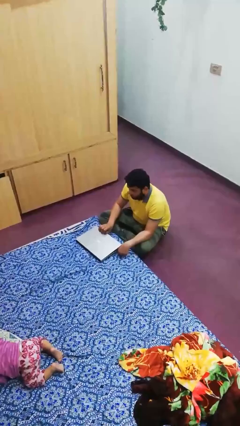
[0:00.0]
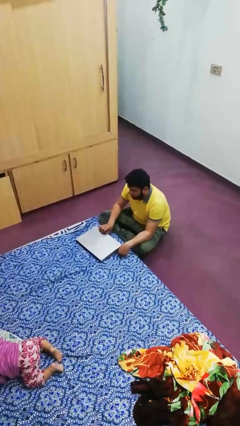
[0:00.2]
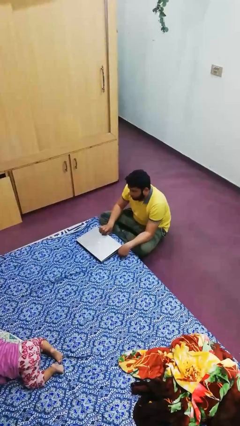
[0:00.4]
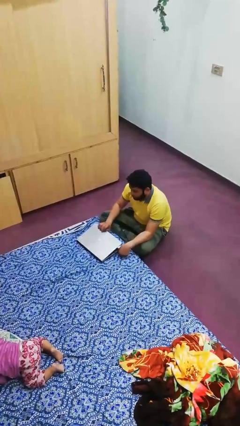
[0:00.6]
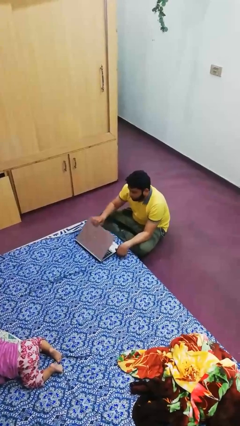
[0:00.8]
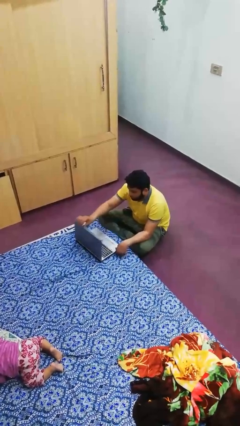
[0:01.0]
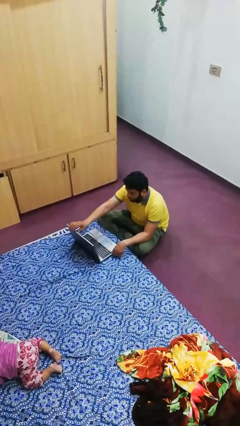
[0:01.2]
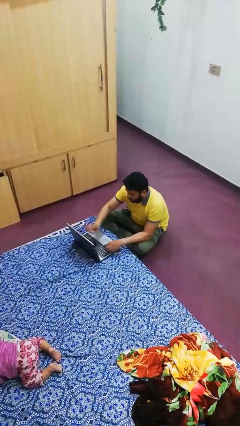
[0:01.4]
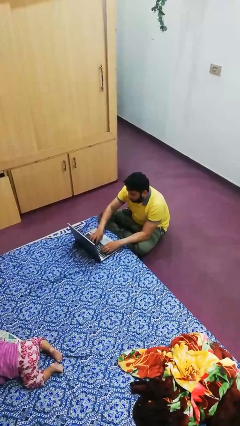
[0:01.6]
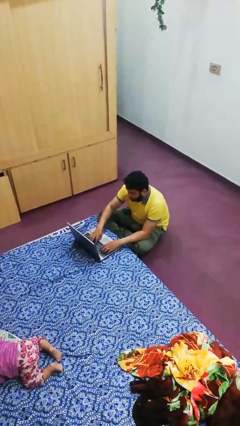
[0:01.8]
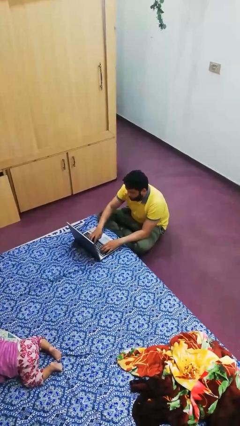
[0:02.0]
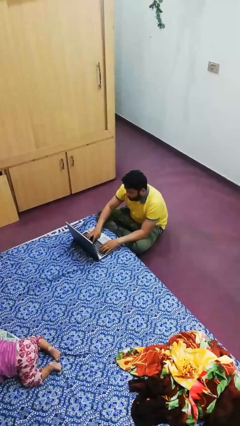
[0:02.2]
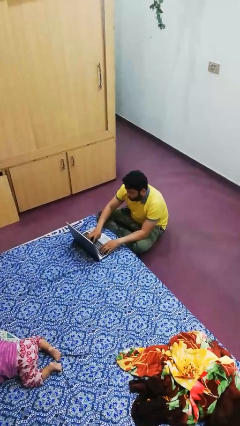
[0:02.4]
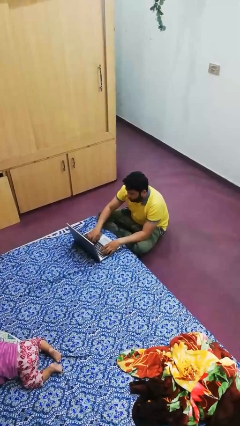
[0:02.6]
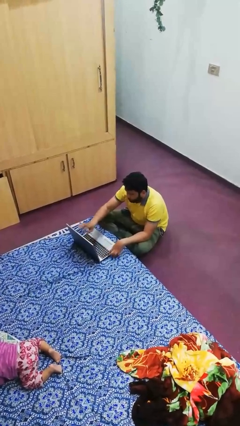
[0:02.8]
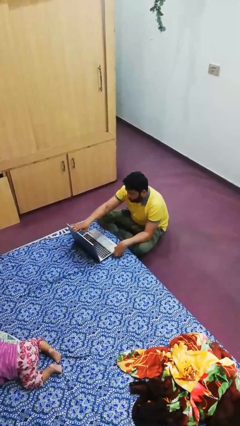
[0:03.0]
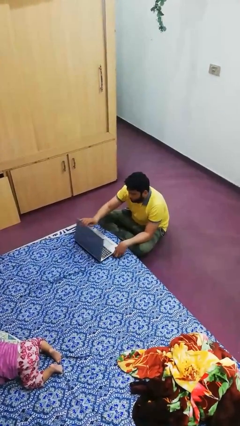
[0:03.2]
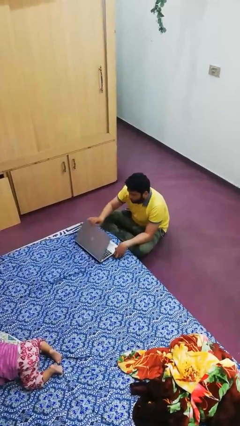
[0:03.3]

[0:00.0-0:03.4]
person interacts with laptop

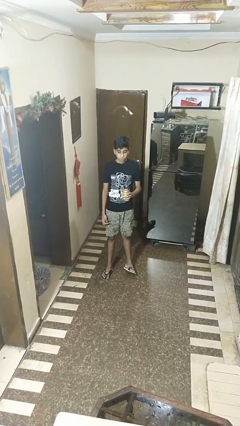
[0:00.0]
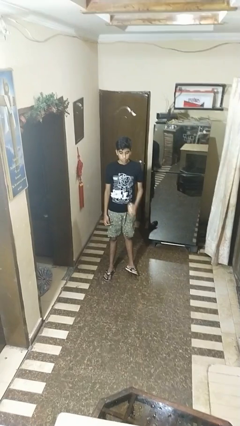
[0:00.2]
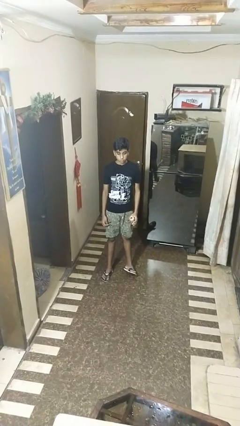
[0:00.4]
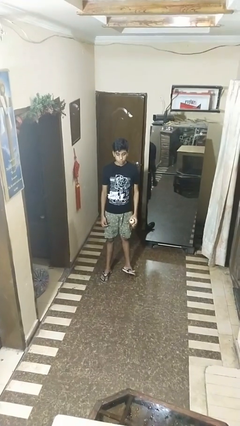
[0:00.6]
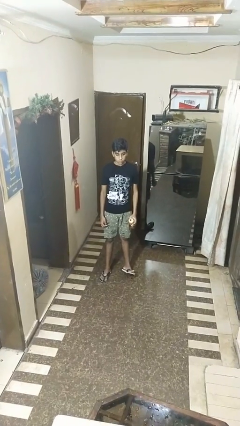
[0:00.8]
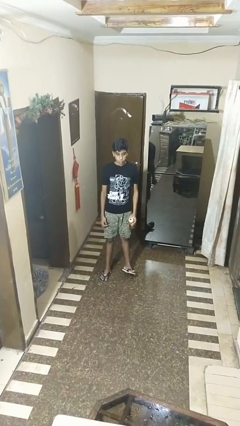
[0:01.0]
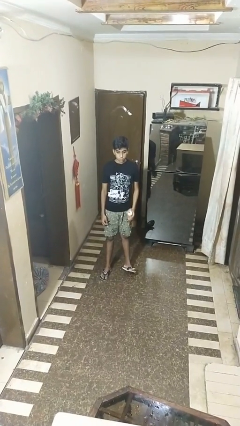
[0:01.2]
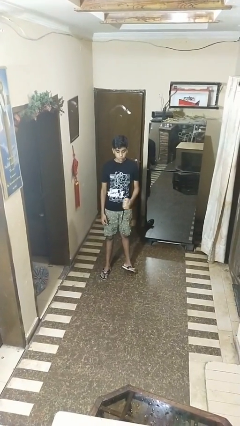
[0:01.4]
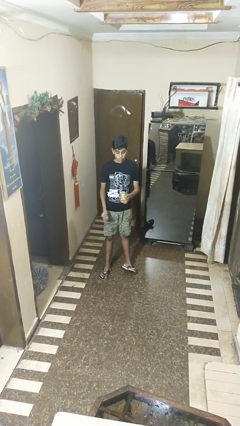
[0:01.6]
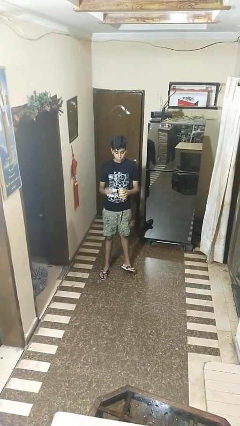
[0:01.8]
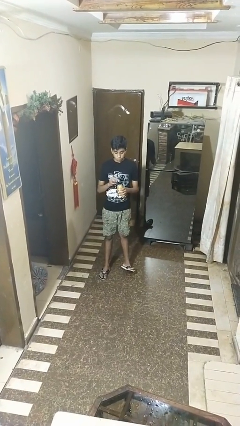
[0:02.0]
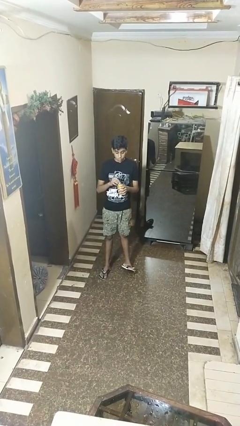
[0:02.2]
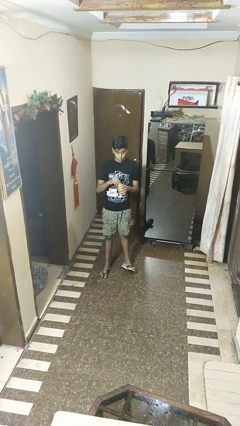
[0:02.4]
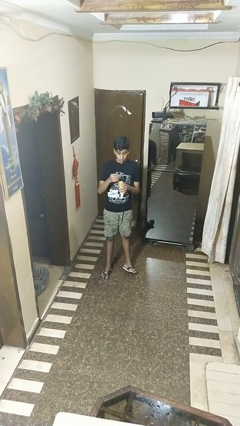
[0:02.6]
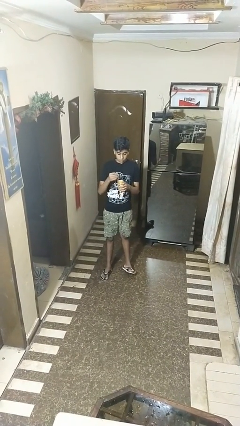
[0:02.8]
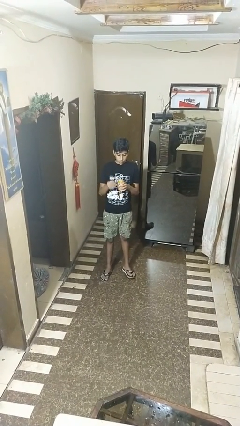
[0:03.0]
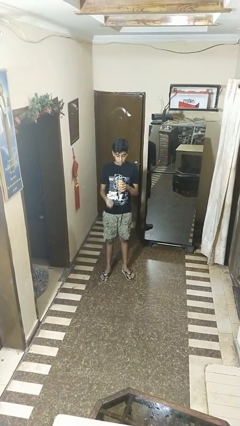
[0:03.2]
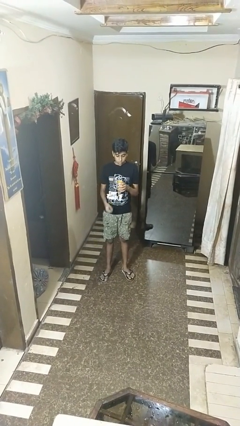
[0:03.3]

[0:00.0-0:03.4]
person opens beverage can

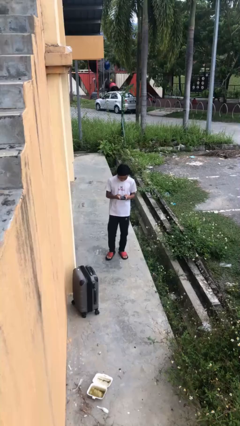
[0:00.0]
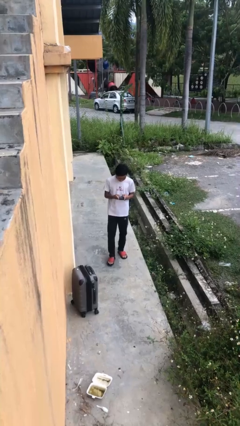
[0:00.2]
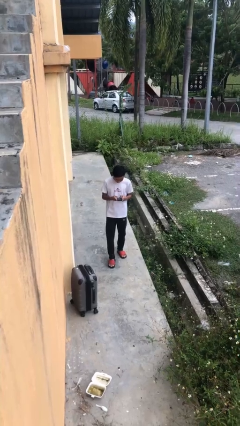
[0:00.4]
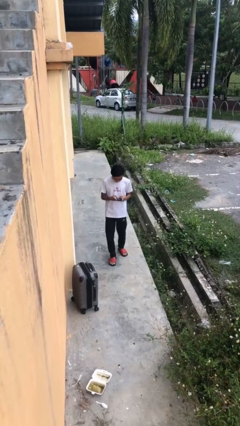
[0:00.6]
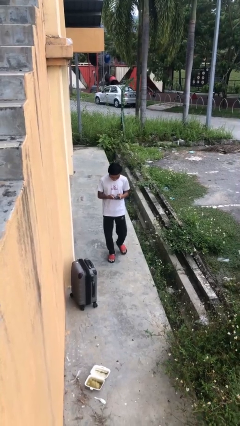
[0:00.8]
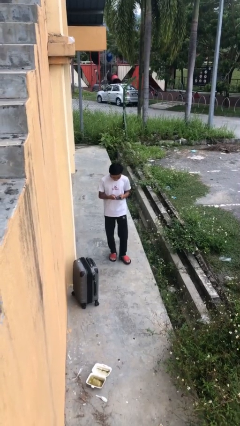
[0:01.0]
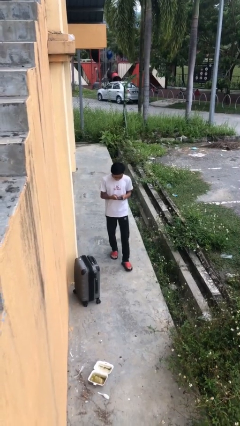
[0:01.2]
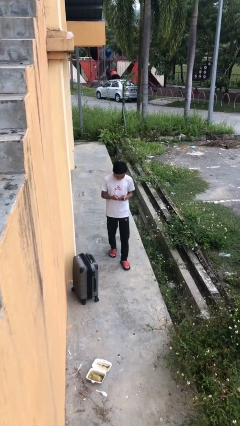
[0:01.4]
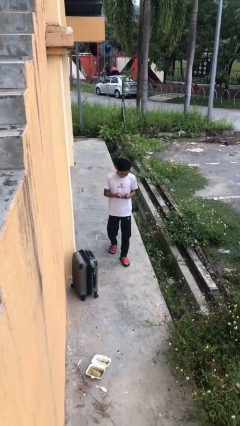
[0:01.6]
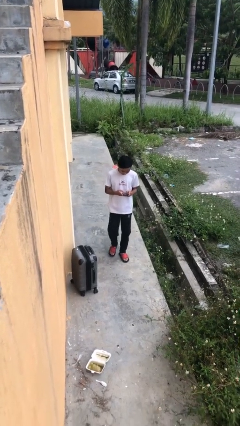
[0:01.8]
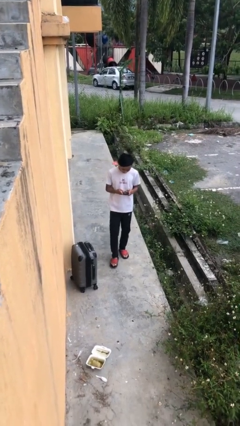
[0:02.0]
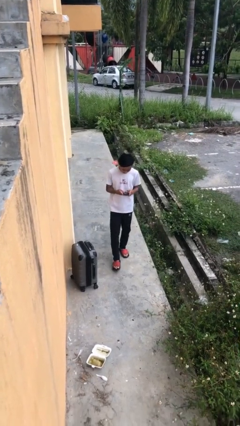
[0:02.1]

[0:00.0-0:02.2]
person texts on phone

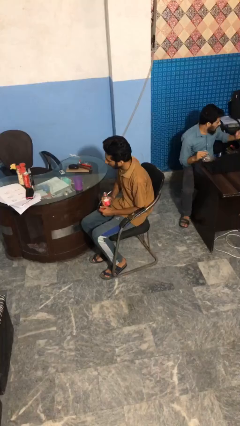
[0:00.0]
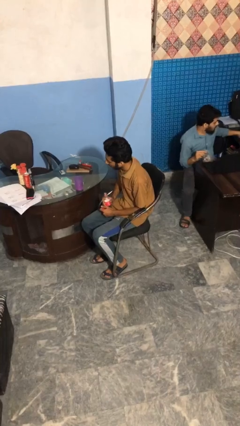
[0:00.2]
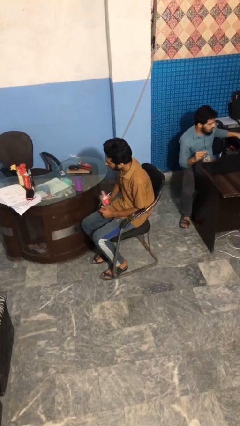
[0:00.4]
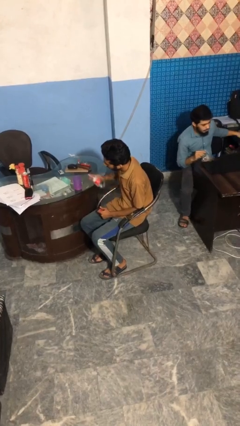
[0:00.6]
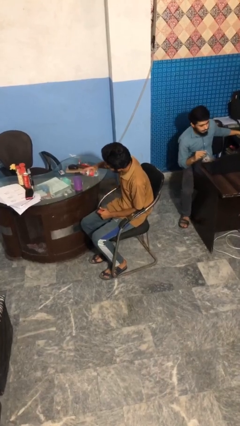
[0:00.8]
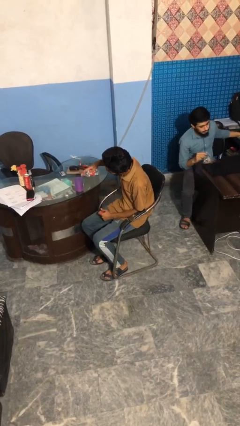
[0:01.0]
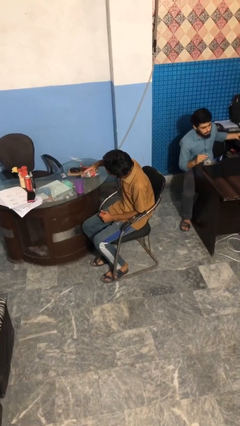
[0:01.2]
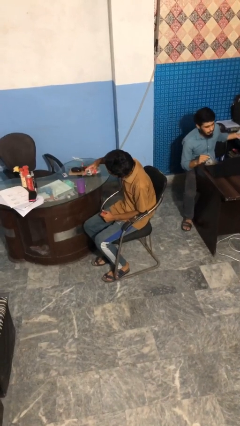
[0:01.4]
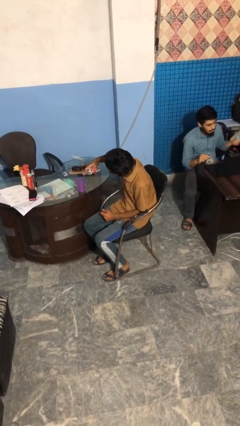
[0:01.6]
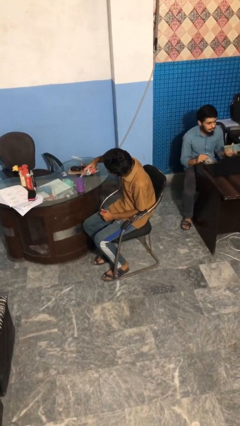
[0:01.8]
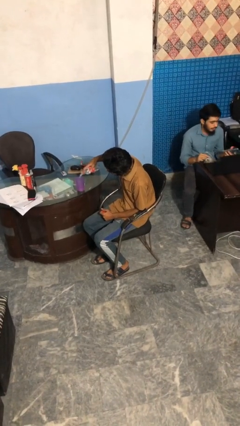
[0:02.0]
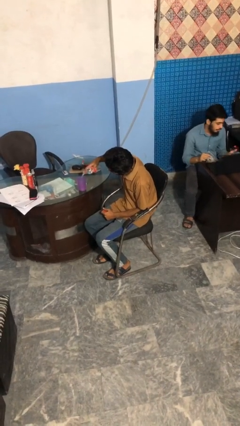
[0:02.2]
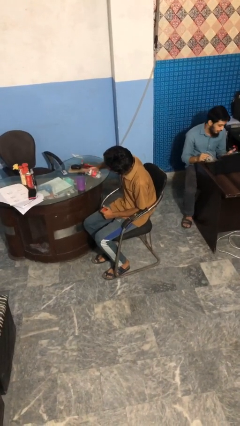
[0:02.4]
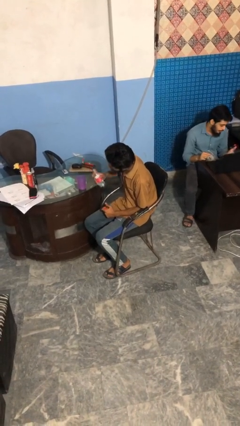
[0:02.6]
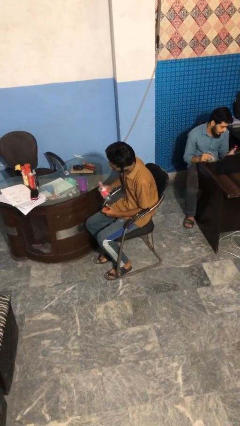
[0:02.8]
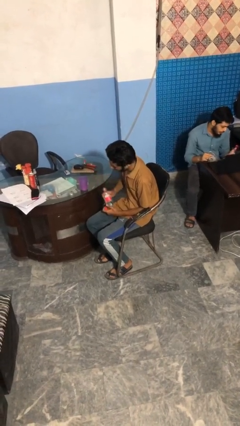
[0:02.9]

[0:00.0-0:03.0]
person pours liquid into cup

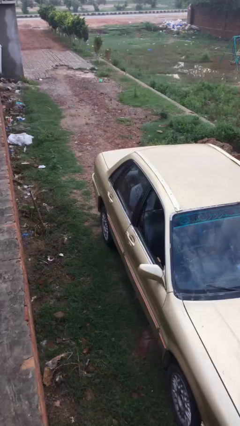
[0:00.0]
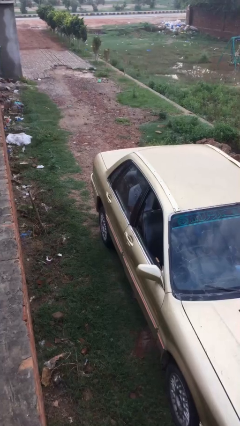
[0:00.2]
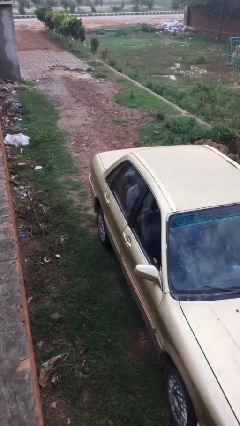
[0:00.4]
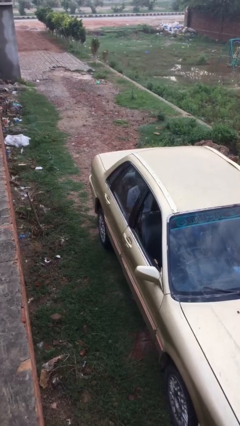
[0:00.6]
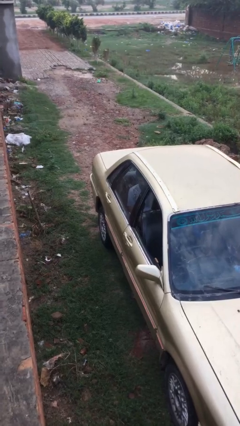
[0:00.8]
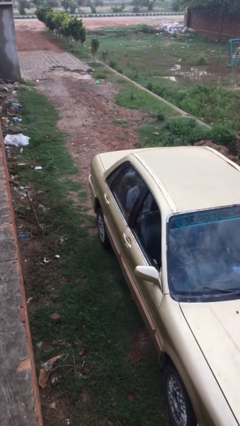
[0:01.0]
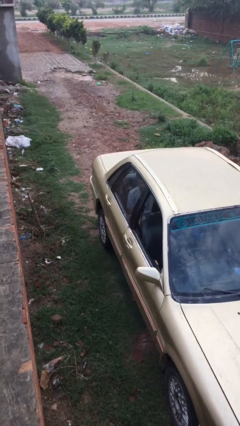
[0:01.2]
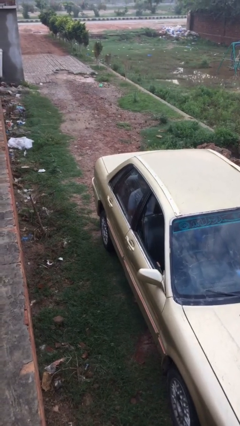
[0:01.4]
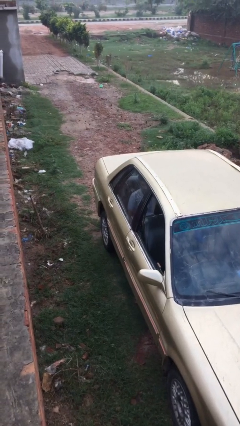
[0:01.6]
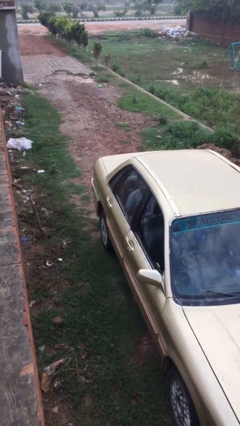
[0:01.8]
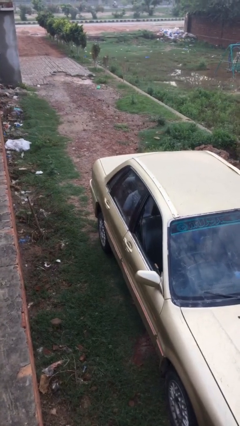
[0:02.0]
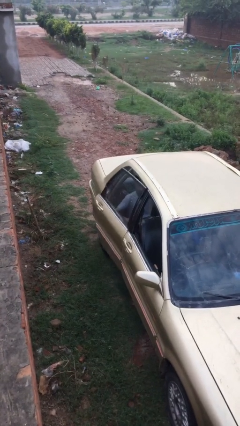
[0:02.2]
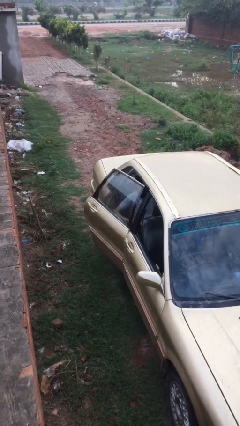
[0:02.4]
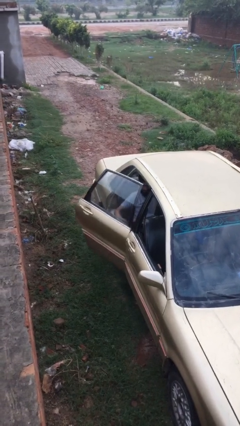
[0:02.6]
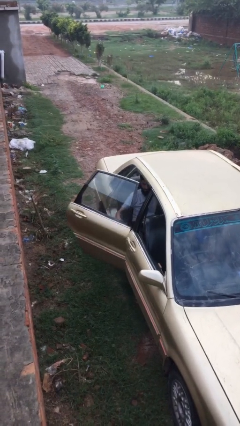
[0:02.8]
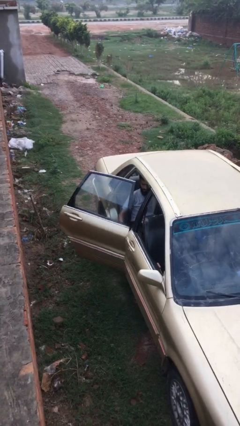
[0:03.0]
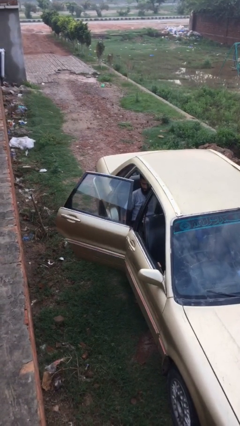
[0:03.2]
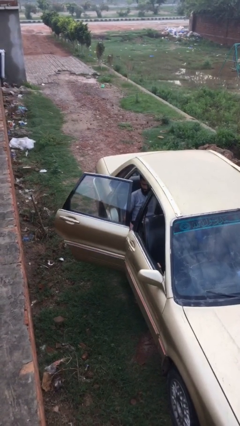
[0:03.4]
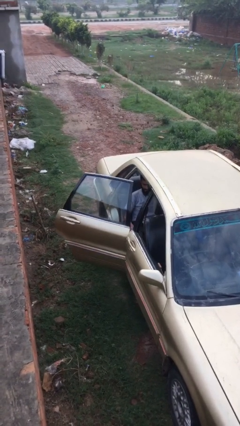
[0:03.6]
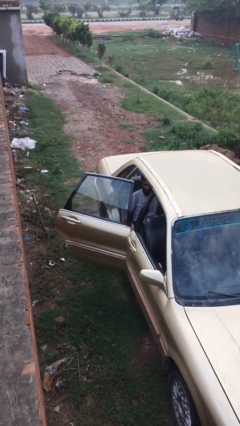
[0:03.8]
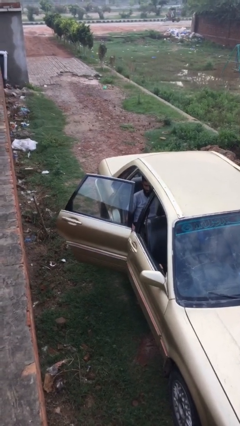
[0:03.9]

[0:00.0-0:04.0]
person opens car door

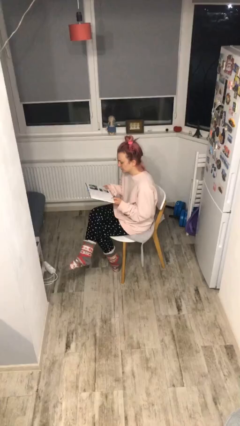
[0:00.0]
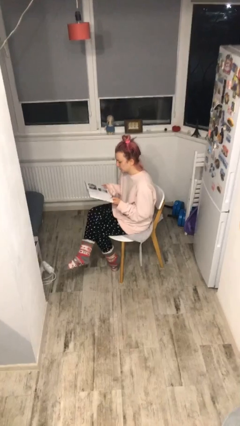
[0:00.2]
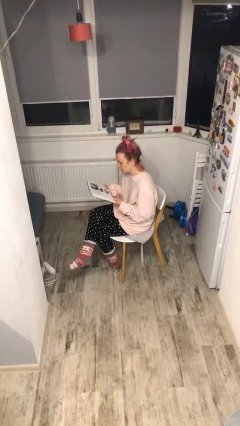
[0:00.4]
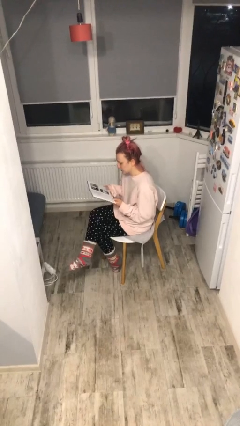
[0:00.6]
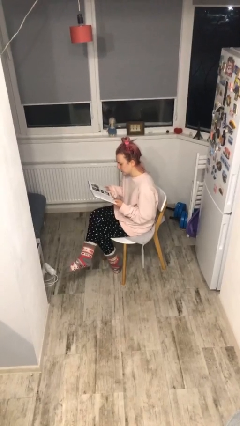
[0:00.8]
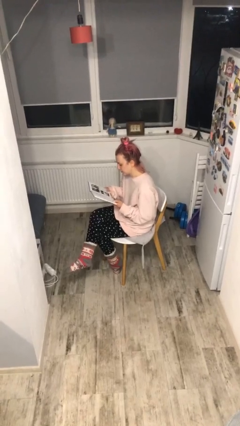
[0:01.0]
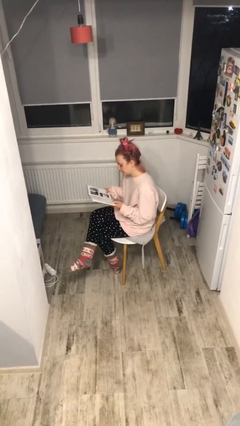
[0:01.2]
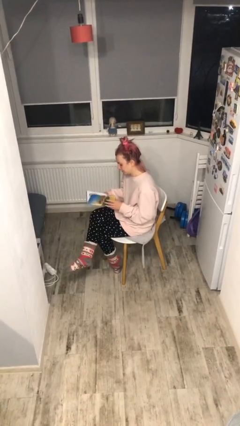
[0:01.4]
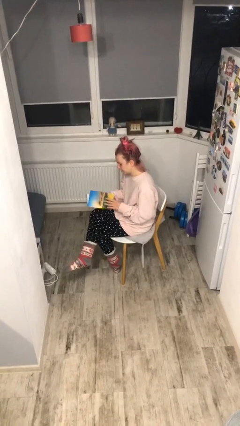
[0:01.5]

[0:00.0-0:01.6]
person reads document

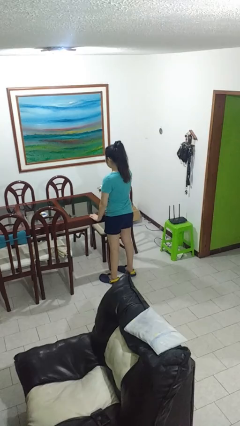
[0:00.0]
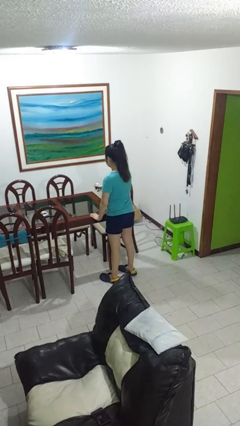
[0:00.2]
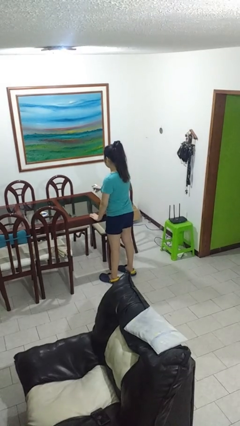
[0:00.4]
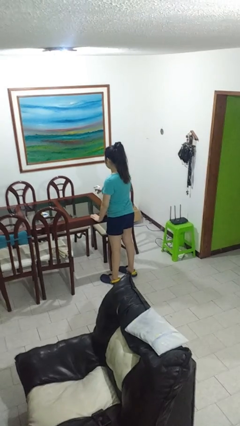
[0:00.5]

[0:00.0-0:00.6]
person sprays from bottle
